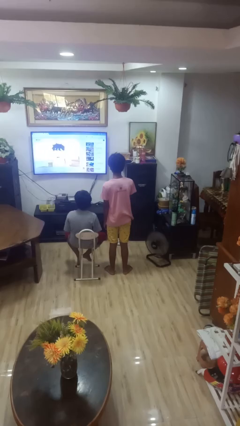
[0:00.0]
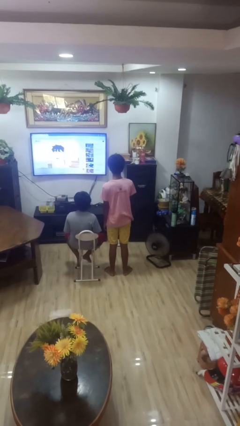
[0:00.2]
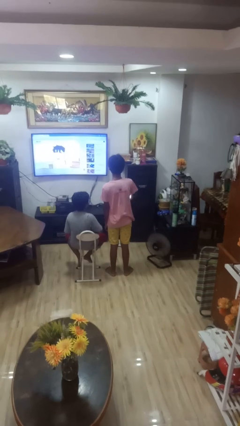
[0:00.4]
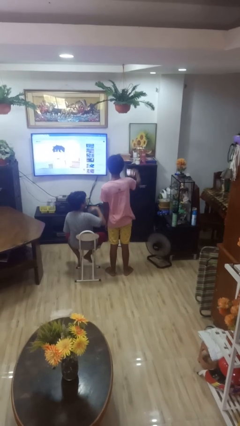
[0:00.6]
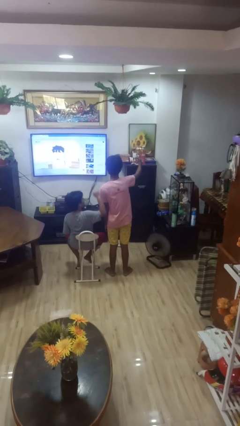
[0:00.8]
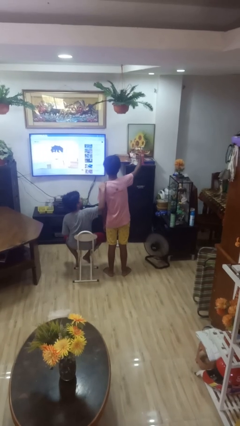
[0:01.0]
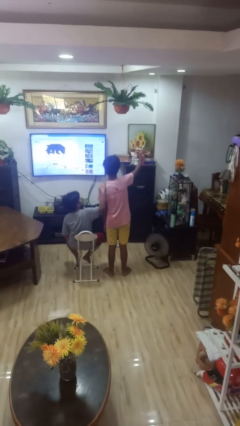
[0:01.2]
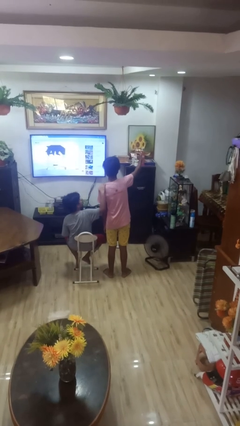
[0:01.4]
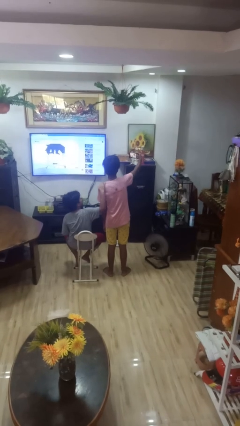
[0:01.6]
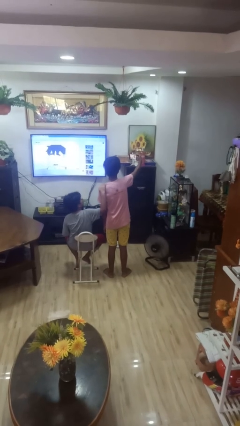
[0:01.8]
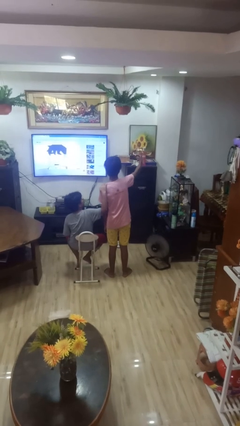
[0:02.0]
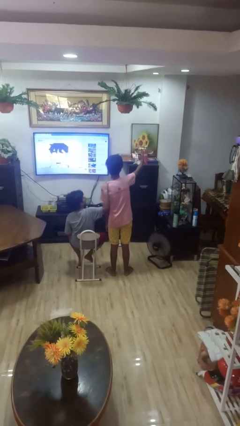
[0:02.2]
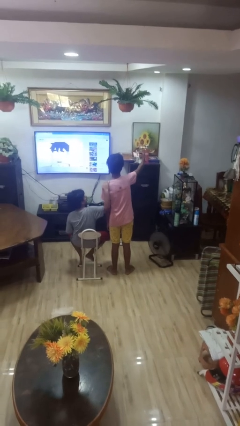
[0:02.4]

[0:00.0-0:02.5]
person takes selfie with person

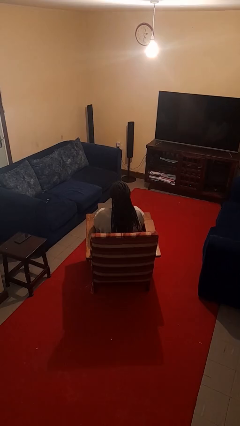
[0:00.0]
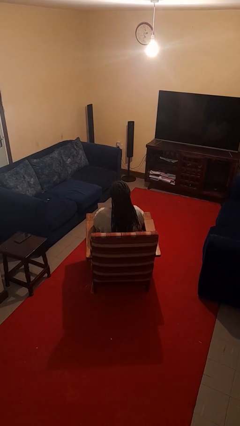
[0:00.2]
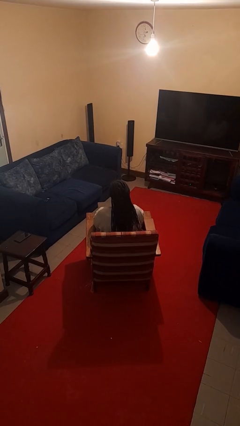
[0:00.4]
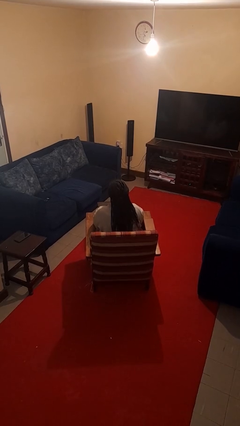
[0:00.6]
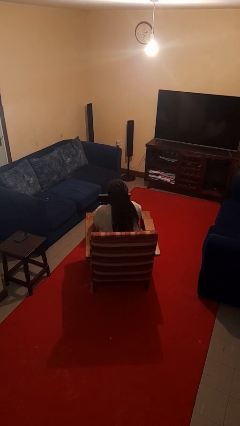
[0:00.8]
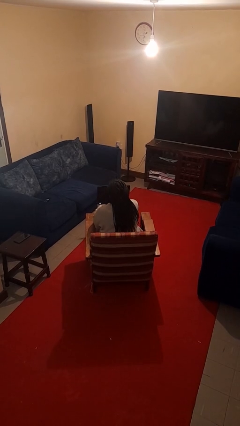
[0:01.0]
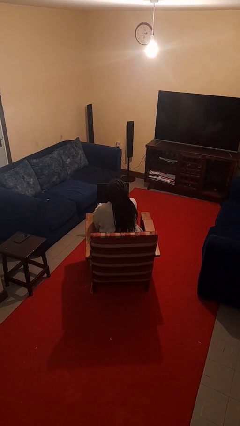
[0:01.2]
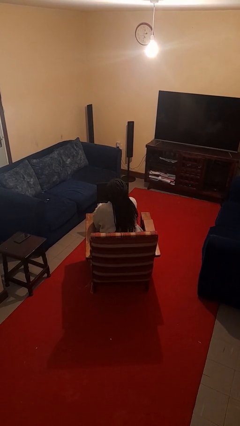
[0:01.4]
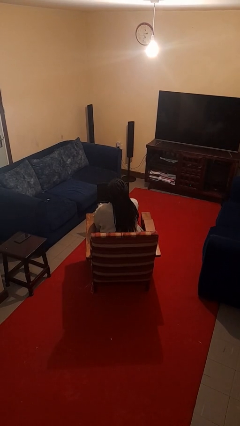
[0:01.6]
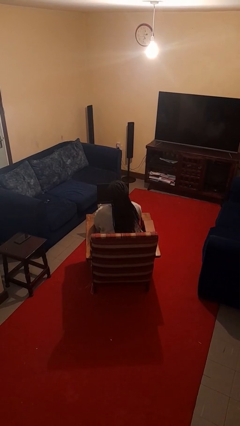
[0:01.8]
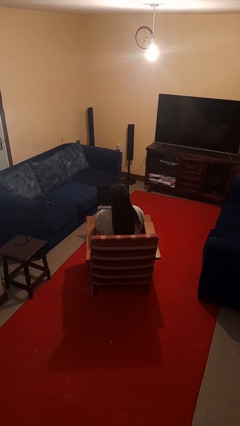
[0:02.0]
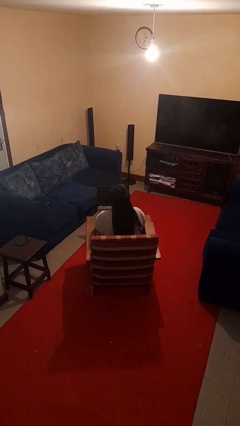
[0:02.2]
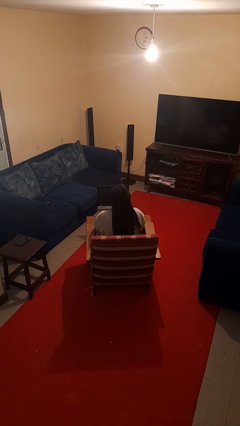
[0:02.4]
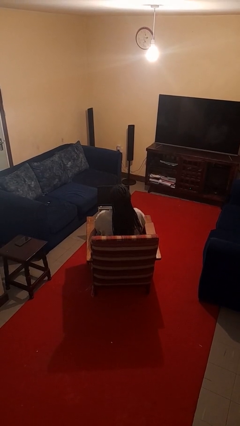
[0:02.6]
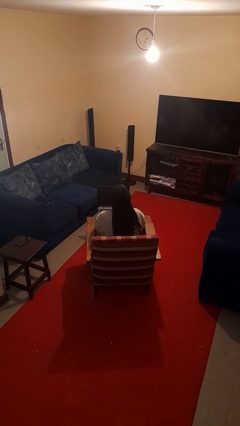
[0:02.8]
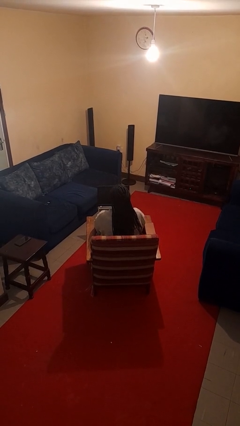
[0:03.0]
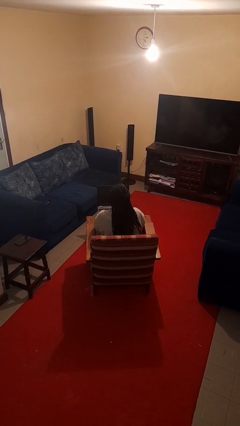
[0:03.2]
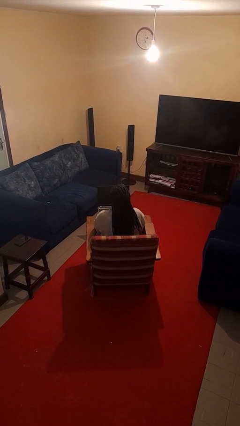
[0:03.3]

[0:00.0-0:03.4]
person opens laptop

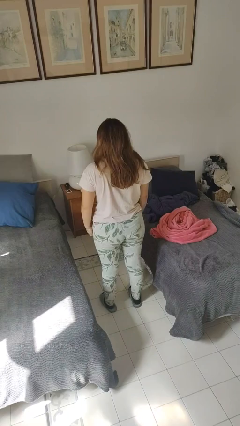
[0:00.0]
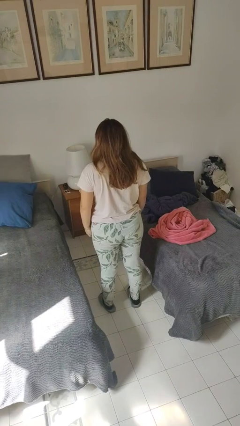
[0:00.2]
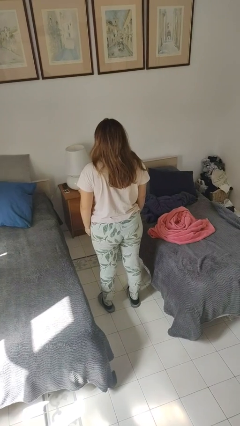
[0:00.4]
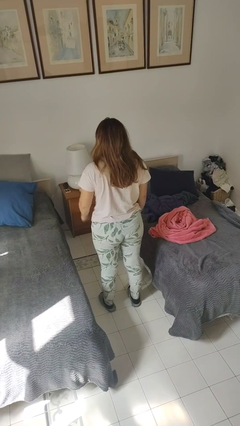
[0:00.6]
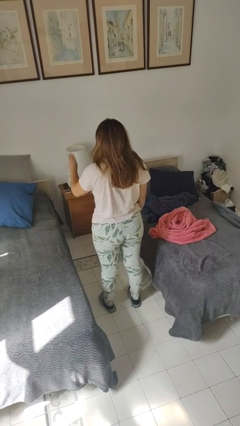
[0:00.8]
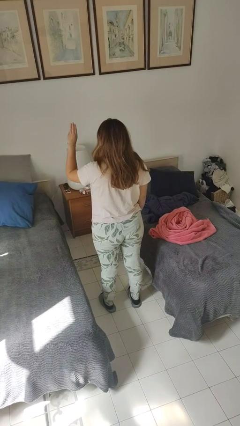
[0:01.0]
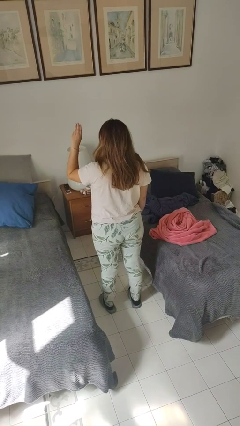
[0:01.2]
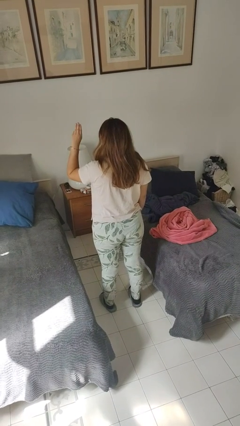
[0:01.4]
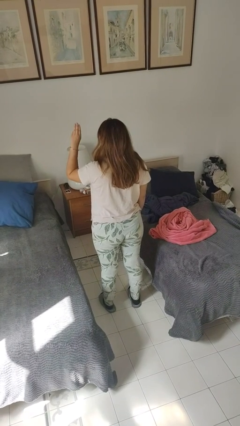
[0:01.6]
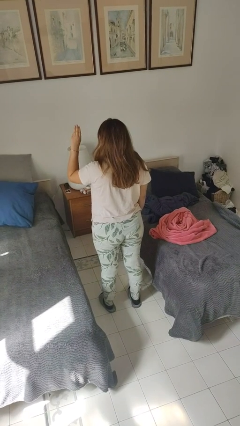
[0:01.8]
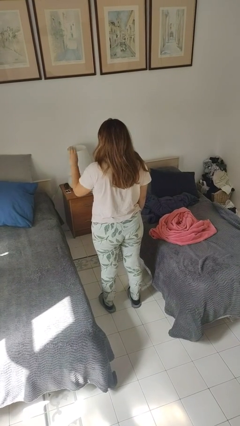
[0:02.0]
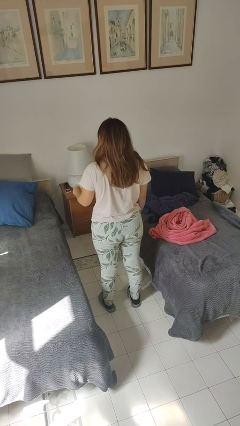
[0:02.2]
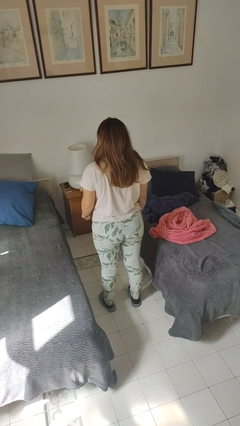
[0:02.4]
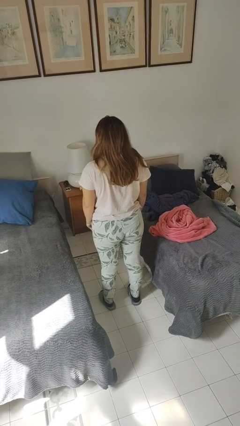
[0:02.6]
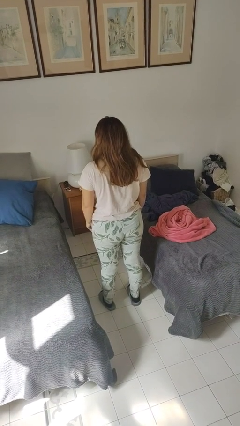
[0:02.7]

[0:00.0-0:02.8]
person gestures number three

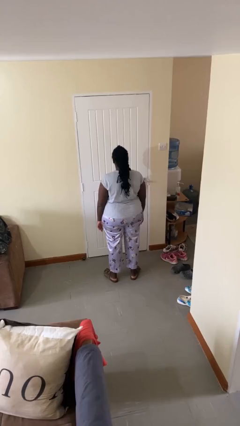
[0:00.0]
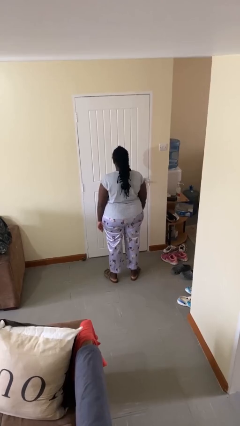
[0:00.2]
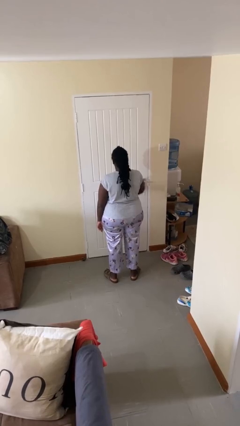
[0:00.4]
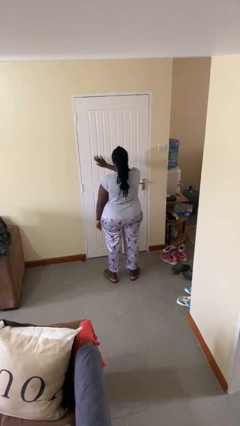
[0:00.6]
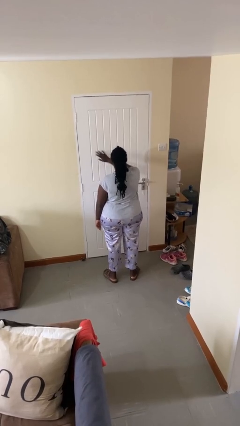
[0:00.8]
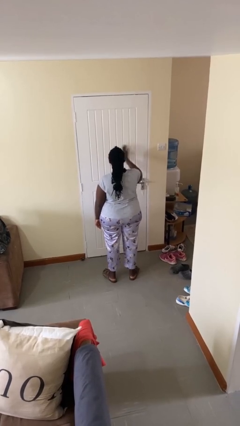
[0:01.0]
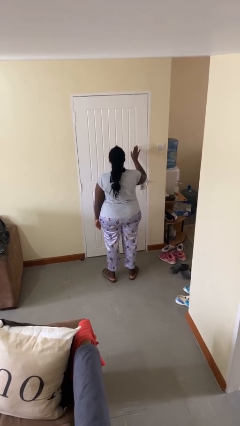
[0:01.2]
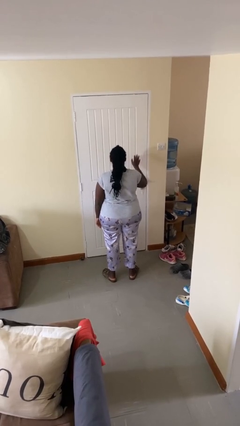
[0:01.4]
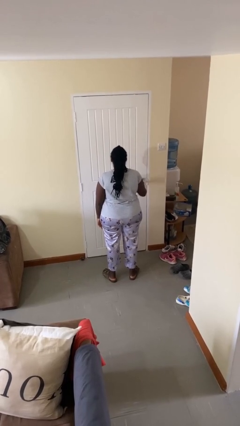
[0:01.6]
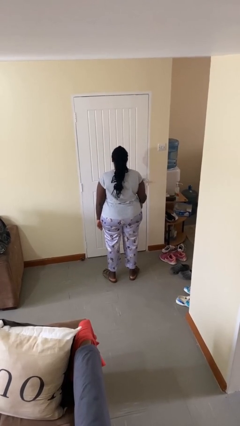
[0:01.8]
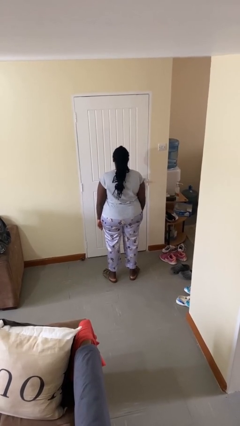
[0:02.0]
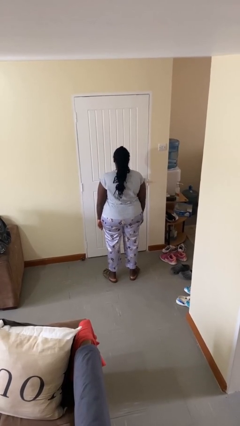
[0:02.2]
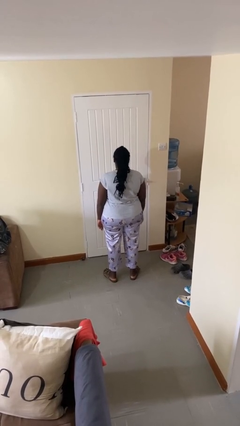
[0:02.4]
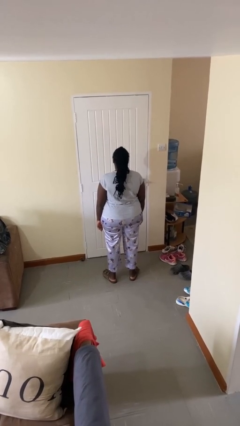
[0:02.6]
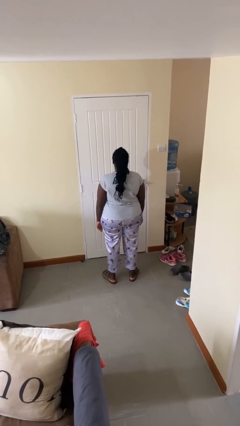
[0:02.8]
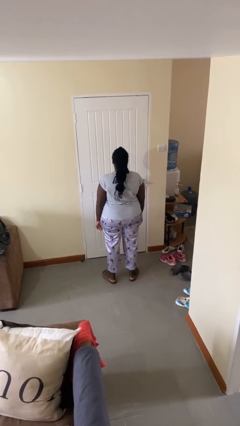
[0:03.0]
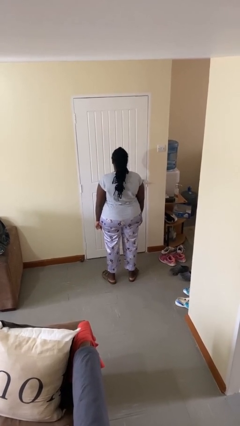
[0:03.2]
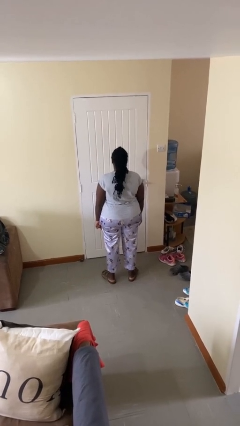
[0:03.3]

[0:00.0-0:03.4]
person gestures swipe right

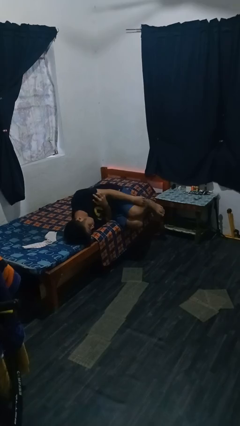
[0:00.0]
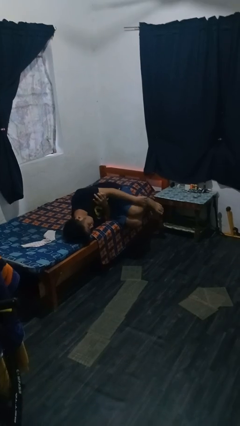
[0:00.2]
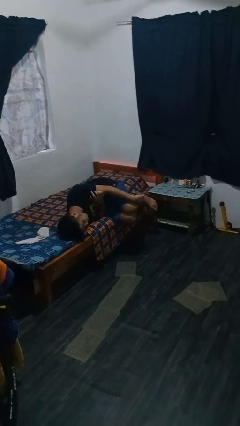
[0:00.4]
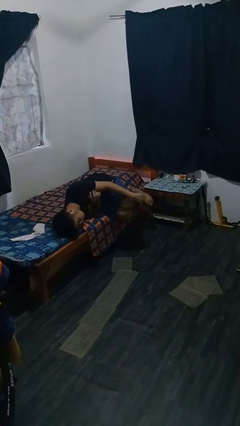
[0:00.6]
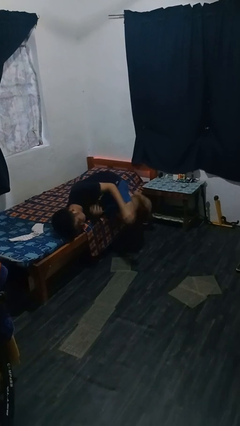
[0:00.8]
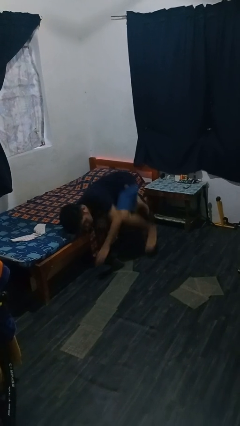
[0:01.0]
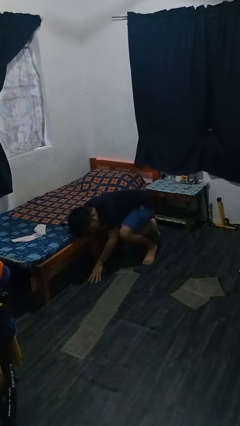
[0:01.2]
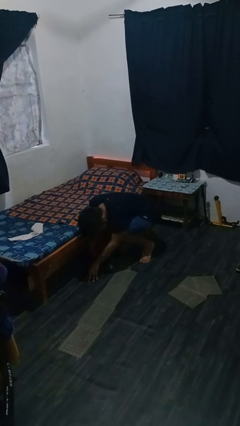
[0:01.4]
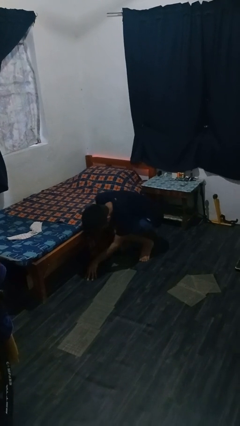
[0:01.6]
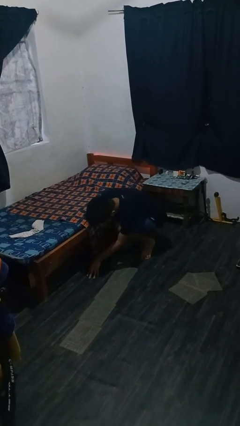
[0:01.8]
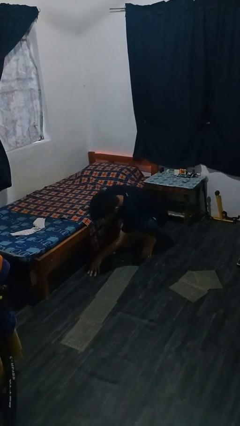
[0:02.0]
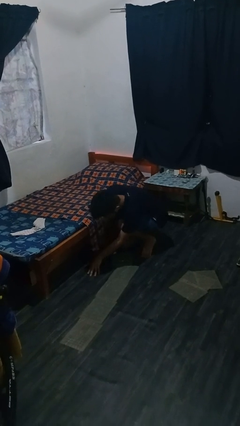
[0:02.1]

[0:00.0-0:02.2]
person falls from bed

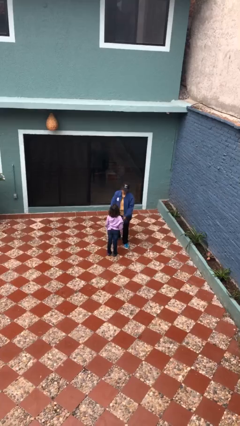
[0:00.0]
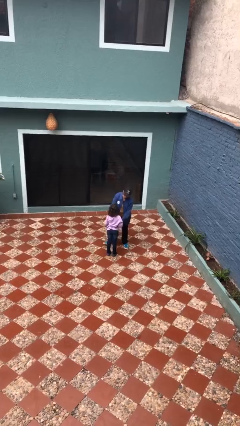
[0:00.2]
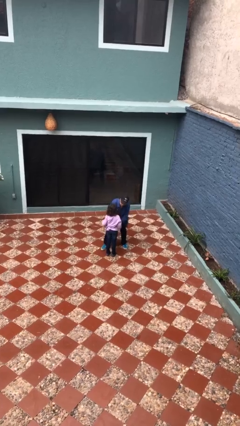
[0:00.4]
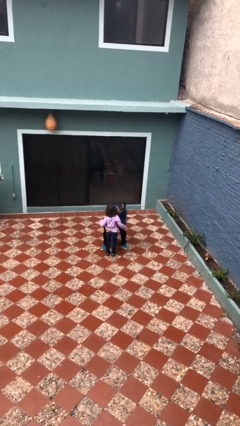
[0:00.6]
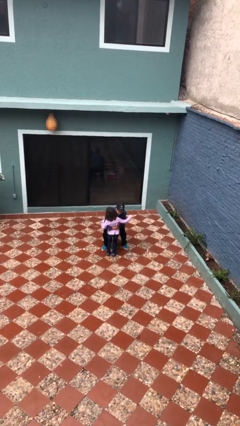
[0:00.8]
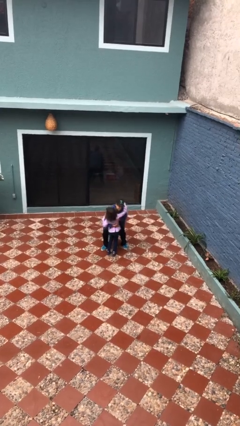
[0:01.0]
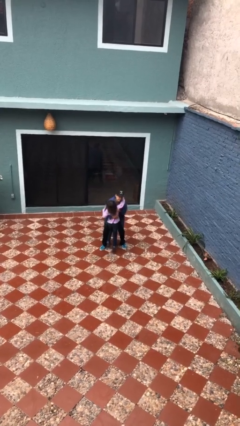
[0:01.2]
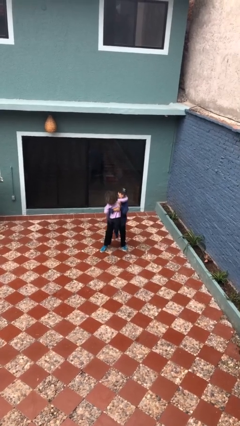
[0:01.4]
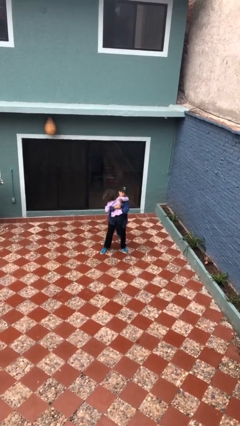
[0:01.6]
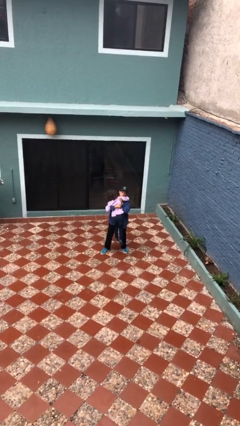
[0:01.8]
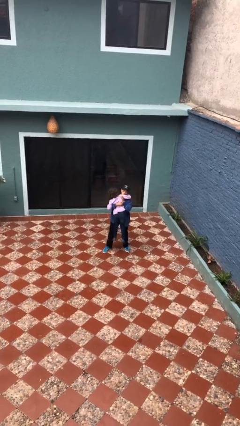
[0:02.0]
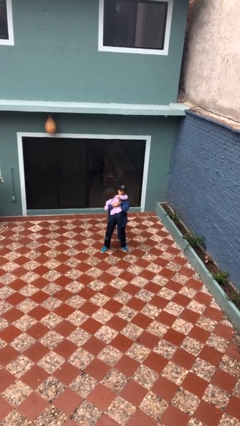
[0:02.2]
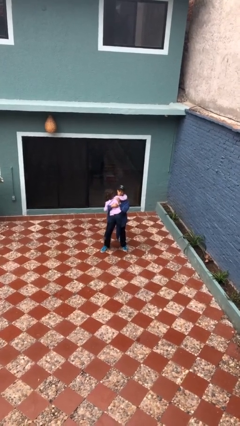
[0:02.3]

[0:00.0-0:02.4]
person picks up person

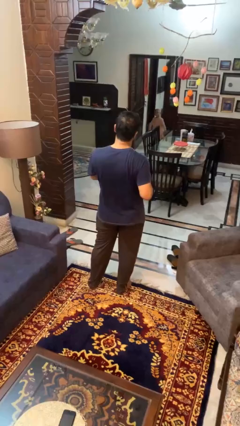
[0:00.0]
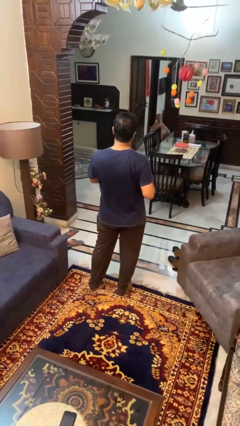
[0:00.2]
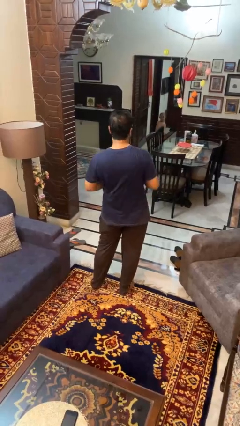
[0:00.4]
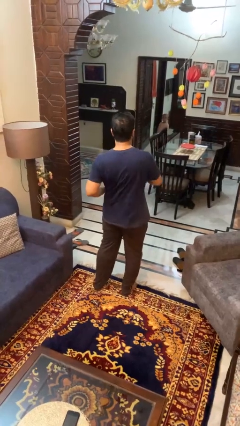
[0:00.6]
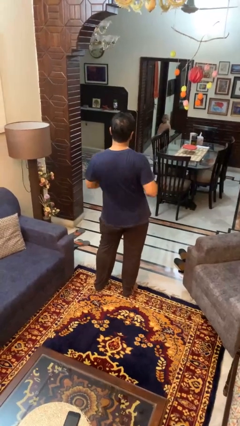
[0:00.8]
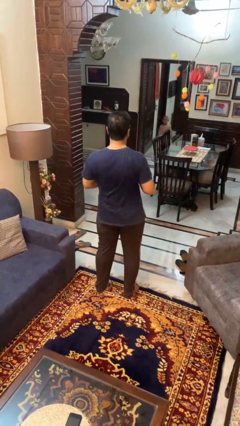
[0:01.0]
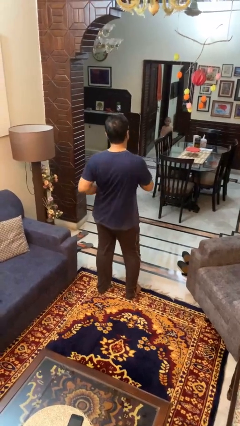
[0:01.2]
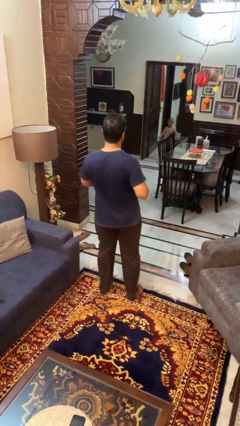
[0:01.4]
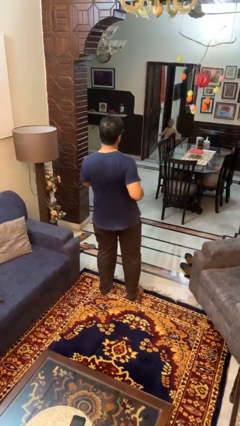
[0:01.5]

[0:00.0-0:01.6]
person wiggles hips
